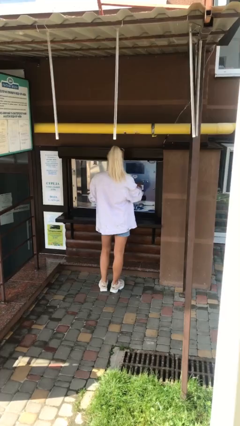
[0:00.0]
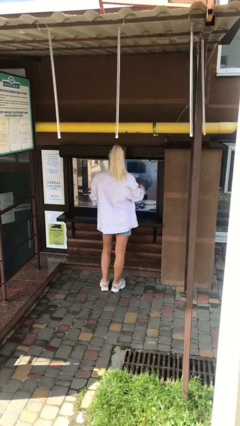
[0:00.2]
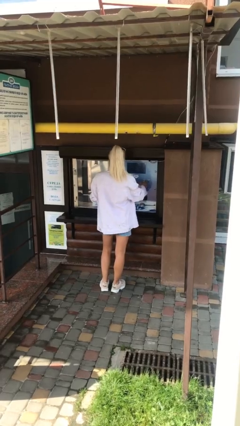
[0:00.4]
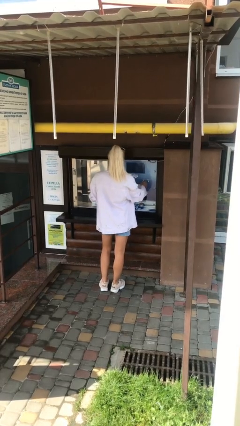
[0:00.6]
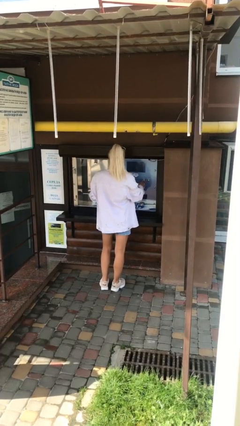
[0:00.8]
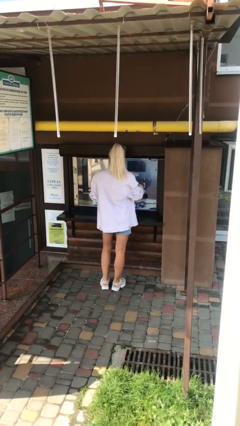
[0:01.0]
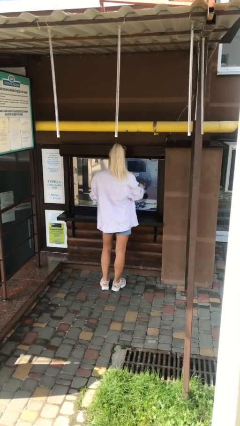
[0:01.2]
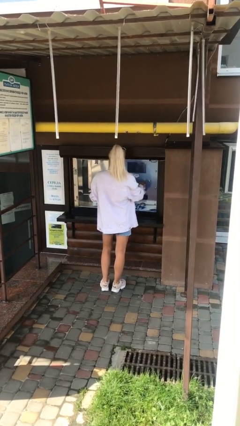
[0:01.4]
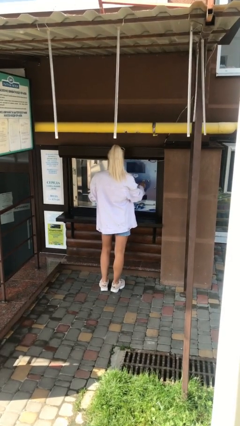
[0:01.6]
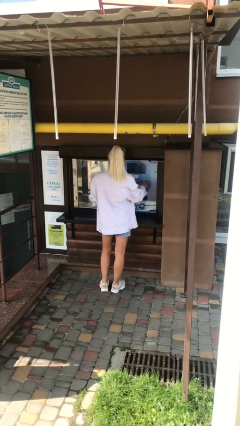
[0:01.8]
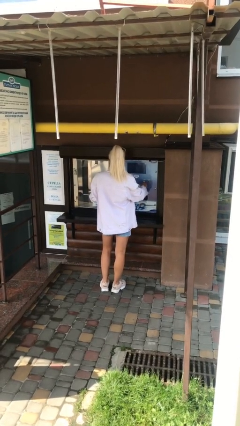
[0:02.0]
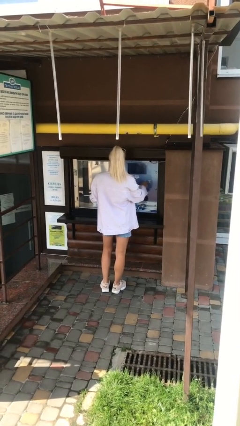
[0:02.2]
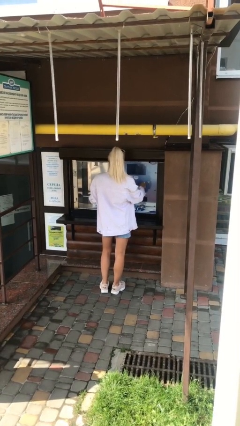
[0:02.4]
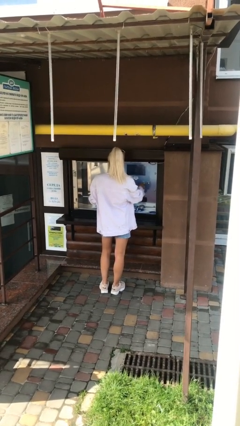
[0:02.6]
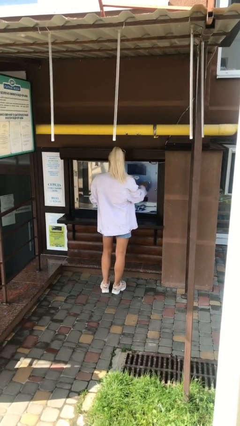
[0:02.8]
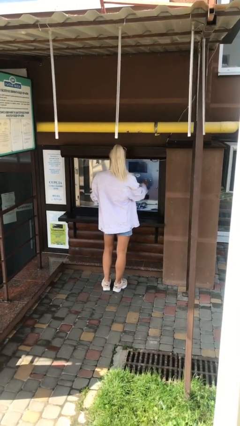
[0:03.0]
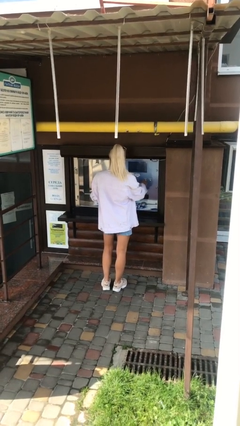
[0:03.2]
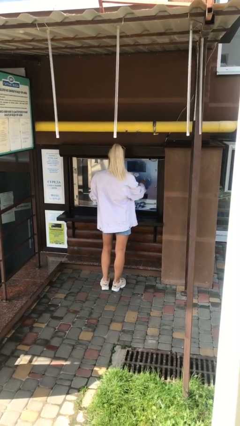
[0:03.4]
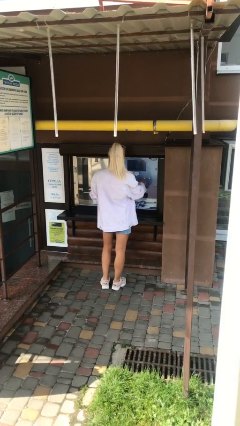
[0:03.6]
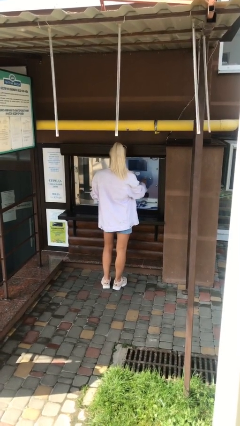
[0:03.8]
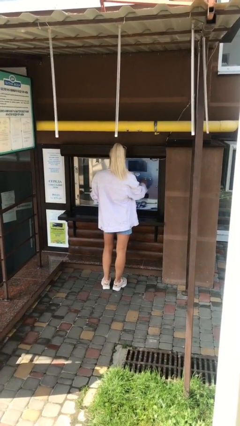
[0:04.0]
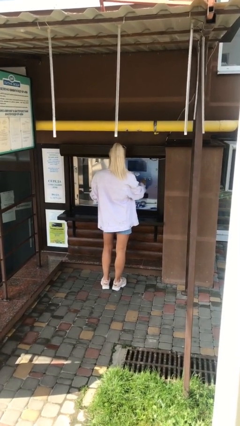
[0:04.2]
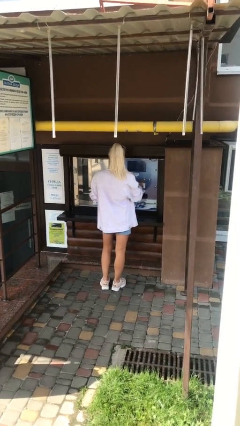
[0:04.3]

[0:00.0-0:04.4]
person purchases from machine

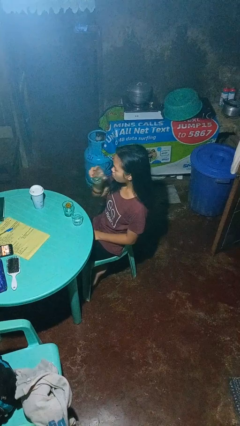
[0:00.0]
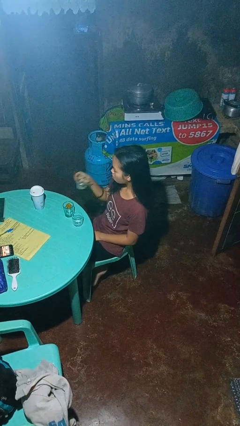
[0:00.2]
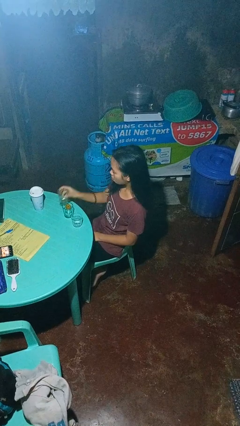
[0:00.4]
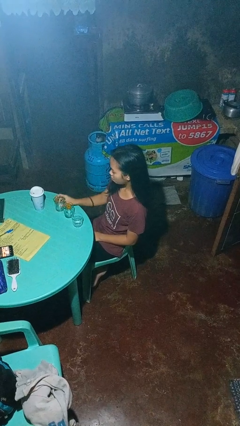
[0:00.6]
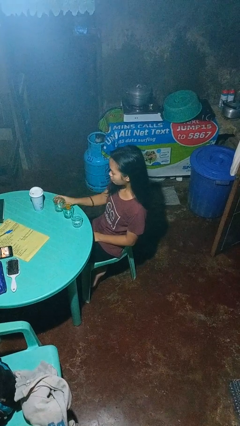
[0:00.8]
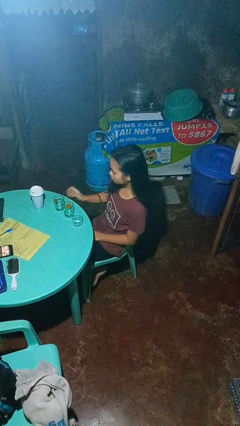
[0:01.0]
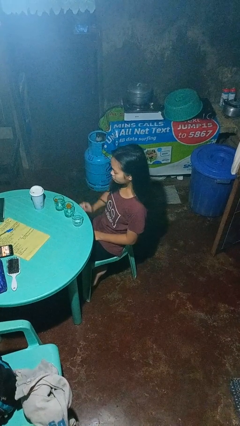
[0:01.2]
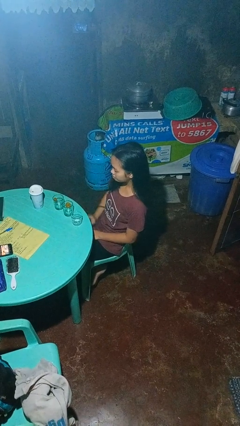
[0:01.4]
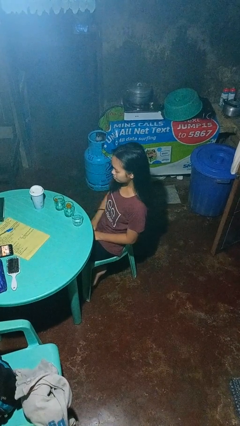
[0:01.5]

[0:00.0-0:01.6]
person puts down object on table

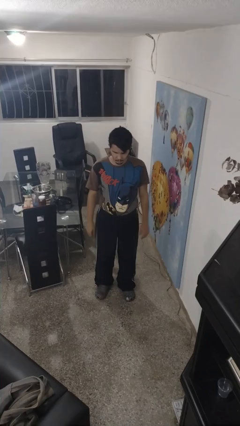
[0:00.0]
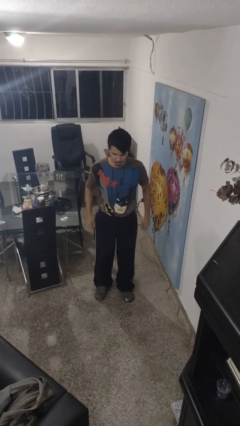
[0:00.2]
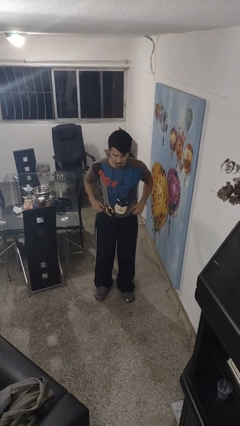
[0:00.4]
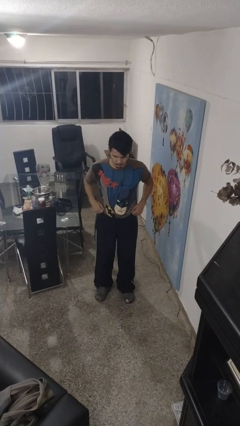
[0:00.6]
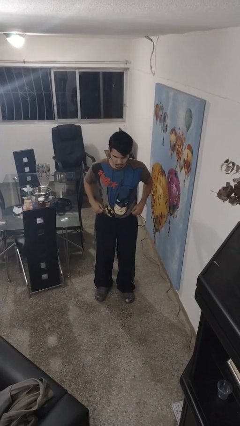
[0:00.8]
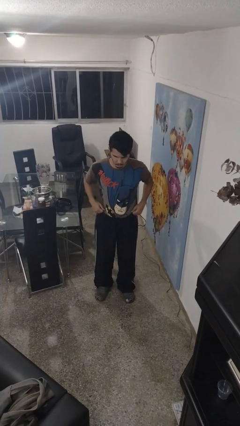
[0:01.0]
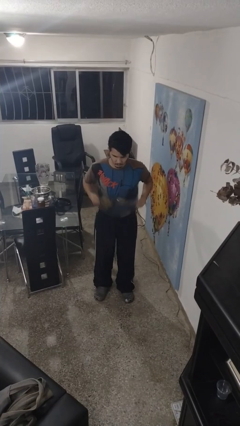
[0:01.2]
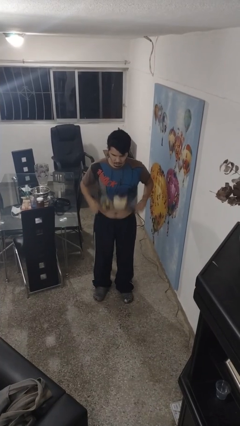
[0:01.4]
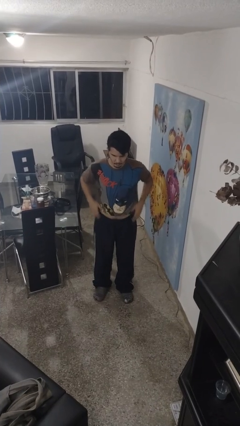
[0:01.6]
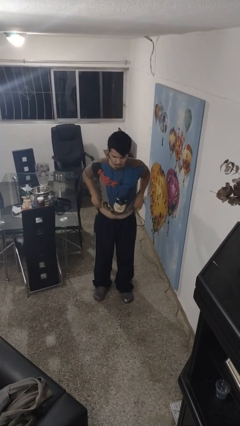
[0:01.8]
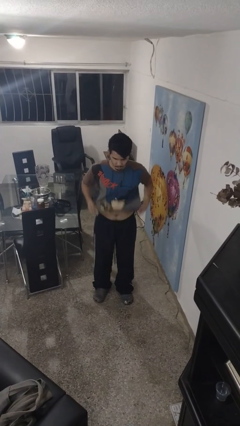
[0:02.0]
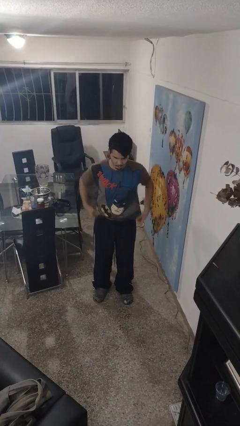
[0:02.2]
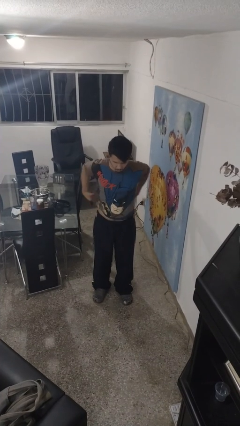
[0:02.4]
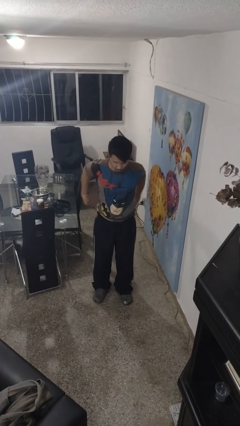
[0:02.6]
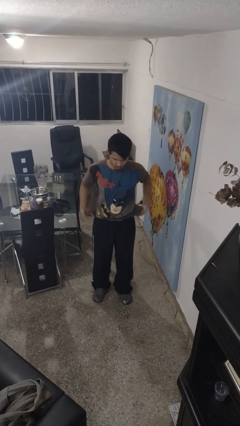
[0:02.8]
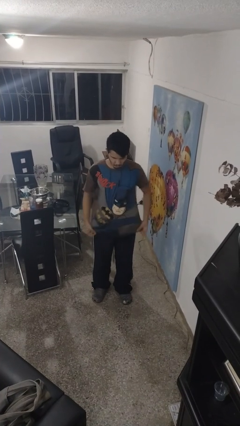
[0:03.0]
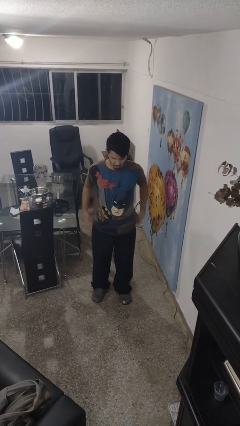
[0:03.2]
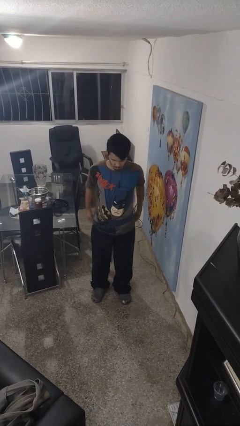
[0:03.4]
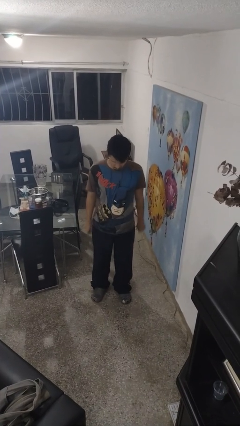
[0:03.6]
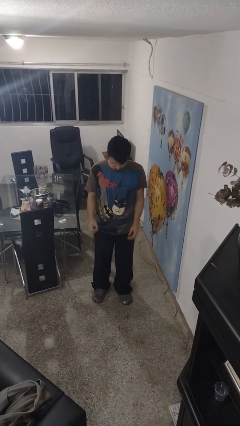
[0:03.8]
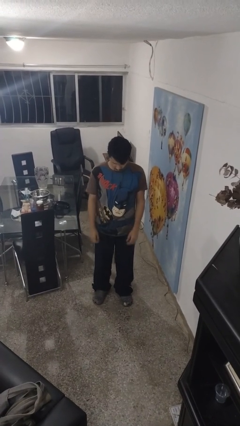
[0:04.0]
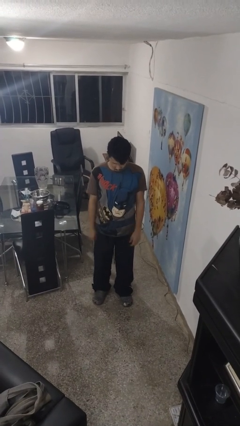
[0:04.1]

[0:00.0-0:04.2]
person untucks shirt

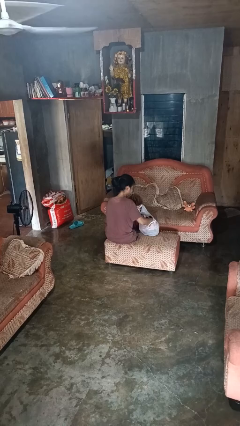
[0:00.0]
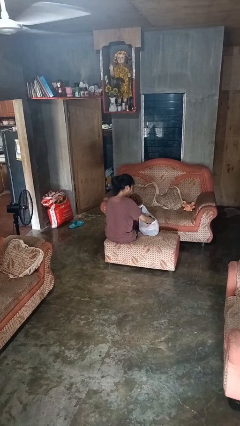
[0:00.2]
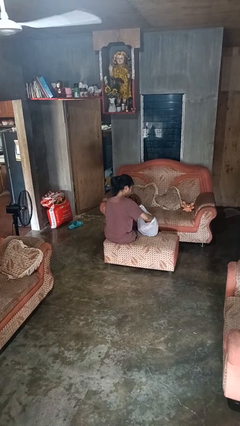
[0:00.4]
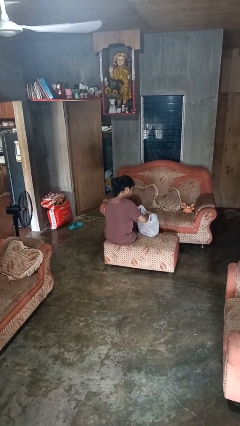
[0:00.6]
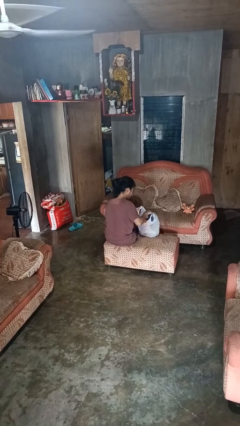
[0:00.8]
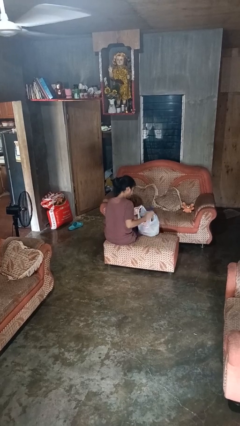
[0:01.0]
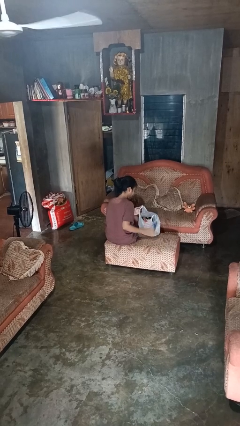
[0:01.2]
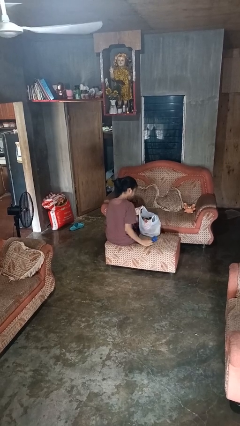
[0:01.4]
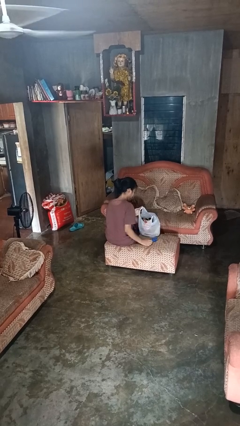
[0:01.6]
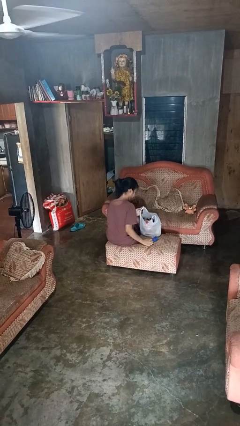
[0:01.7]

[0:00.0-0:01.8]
person takes object from bag

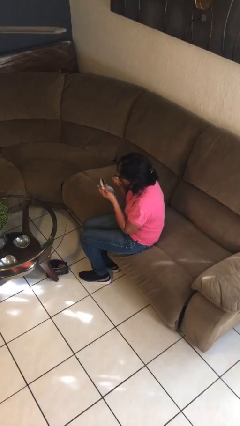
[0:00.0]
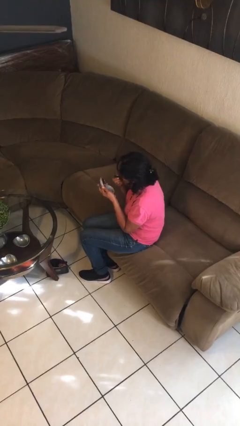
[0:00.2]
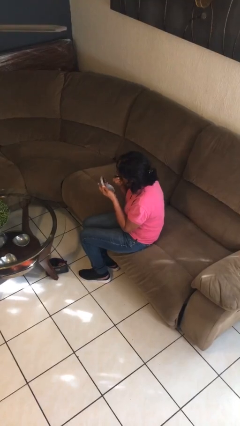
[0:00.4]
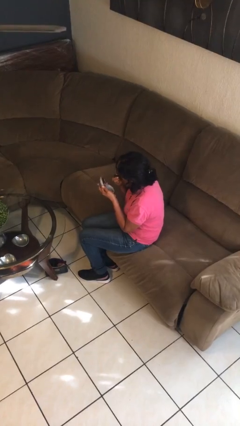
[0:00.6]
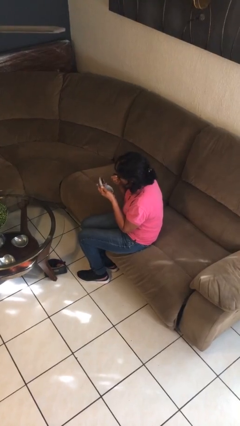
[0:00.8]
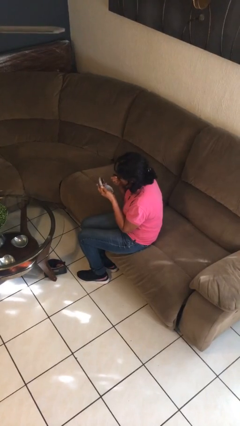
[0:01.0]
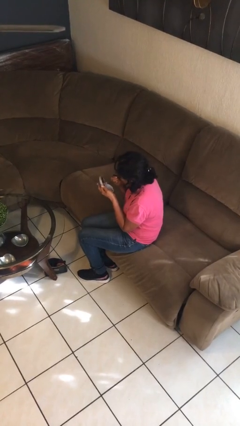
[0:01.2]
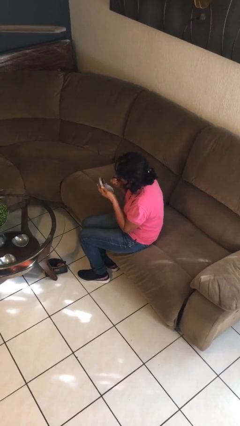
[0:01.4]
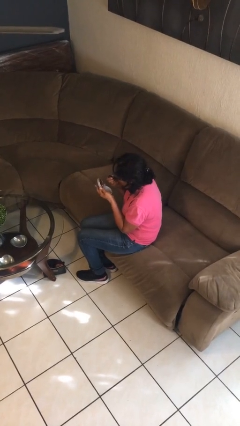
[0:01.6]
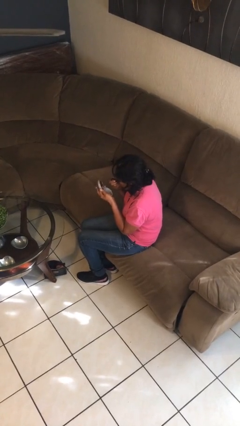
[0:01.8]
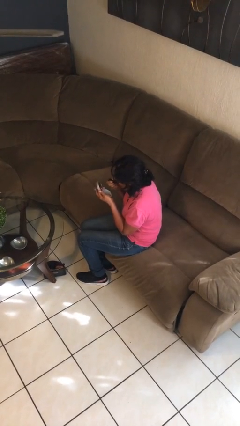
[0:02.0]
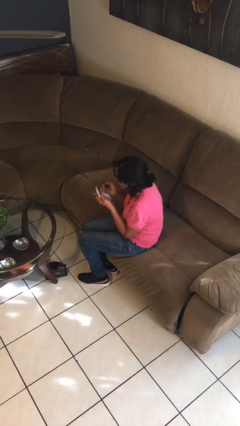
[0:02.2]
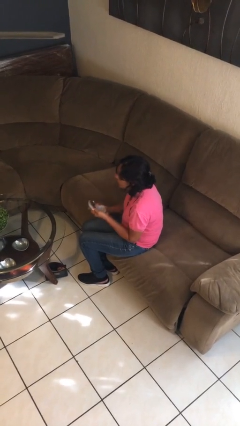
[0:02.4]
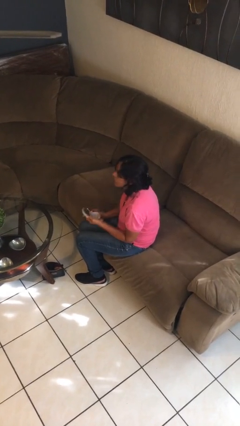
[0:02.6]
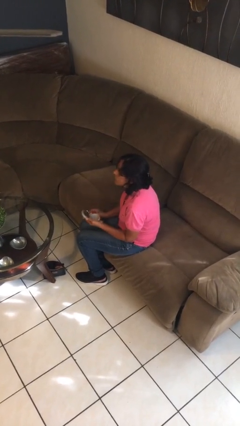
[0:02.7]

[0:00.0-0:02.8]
person applies lip makeup

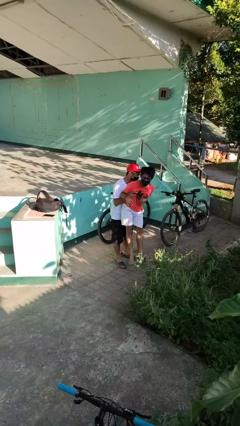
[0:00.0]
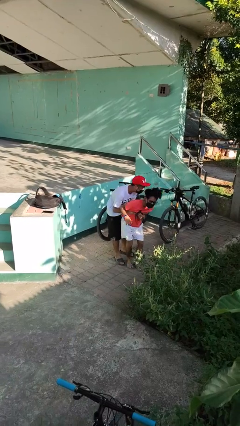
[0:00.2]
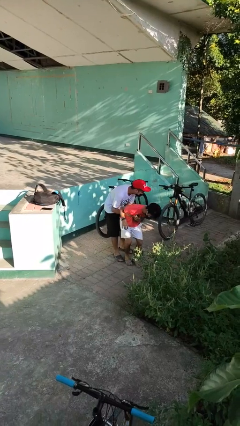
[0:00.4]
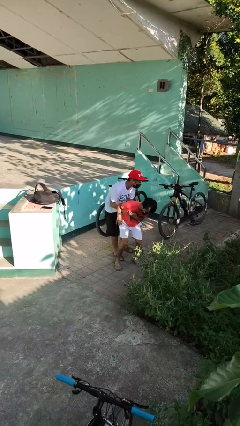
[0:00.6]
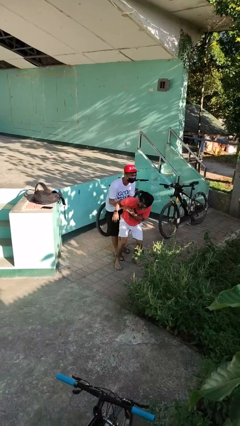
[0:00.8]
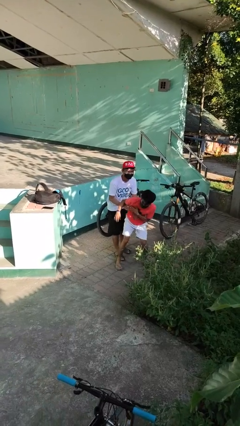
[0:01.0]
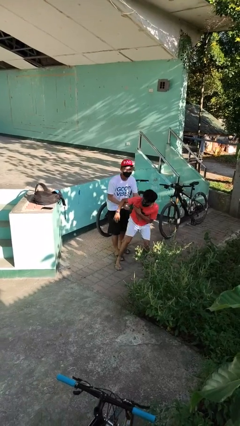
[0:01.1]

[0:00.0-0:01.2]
person puts down person

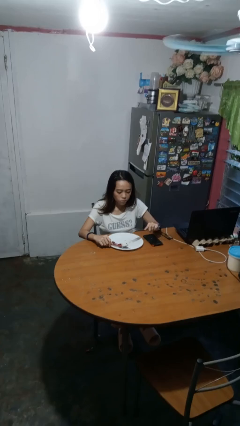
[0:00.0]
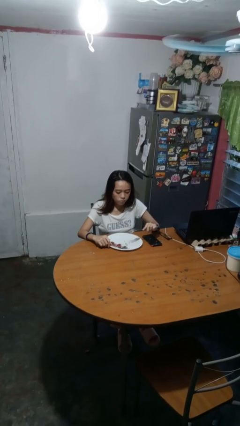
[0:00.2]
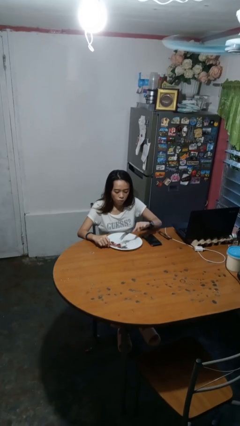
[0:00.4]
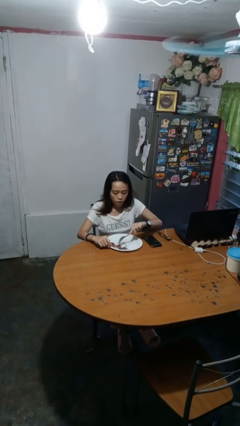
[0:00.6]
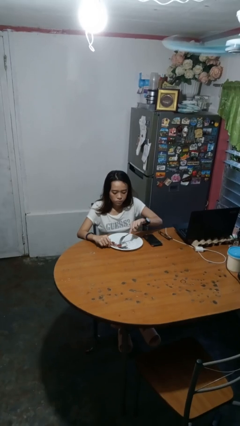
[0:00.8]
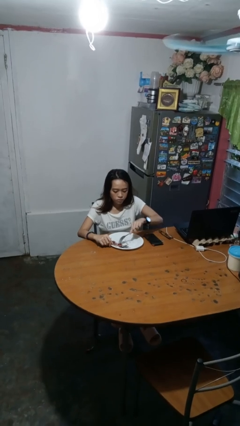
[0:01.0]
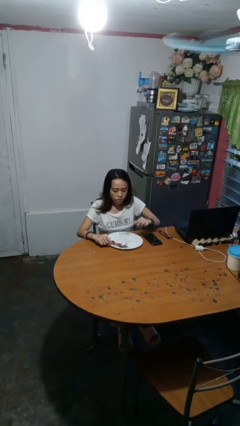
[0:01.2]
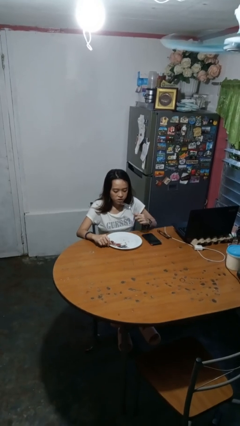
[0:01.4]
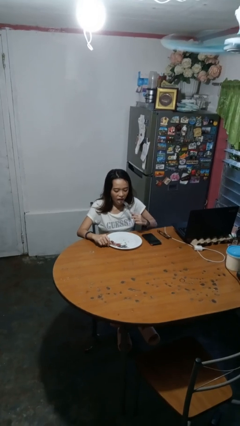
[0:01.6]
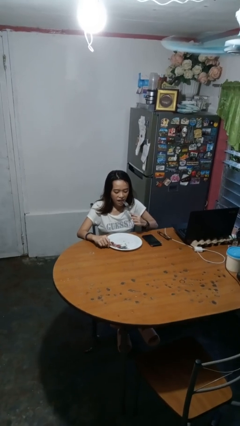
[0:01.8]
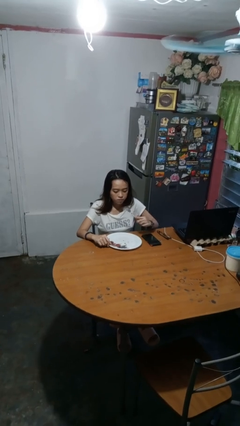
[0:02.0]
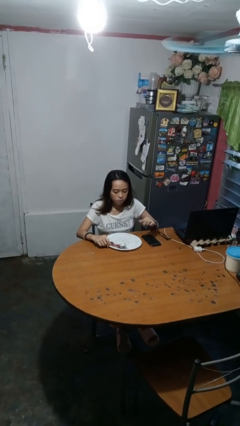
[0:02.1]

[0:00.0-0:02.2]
person eats with utensil
